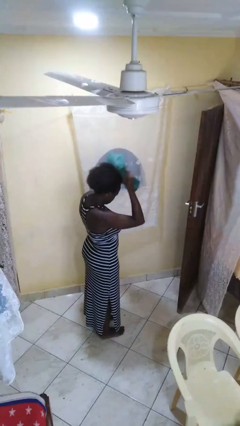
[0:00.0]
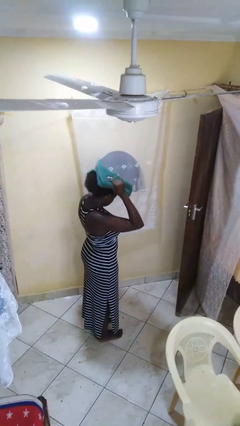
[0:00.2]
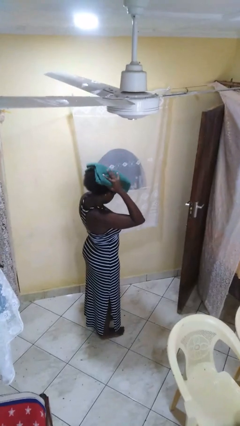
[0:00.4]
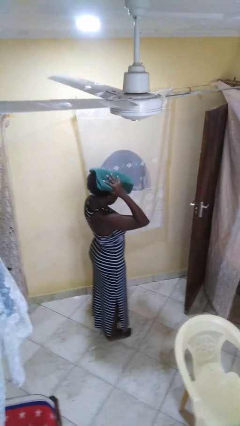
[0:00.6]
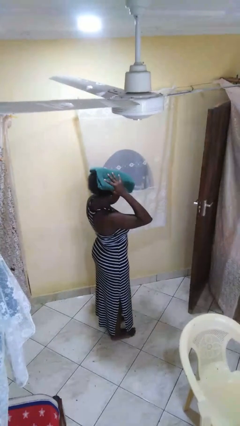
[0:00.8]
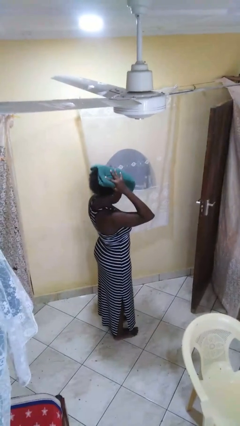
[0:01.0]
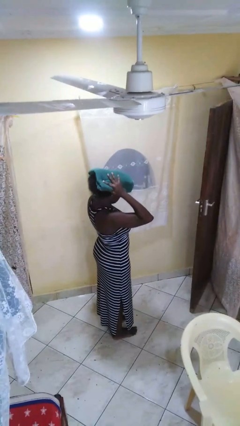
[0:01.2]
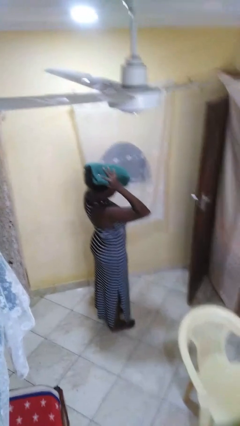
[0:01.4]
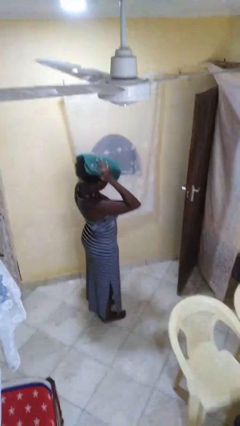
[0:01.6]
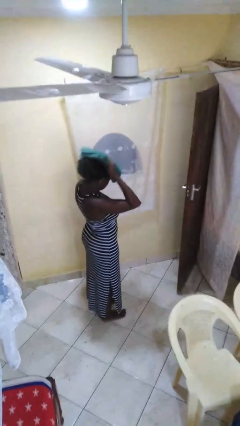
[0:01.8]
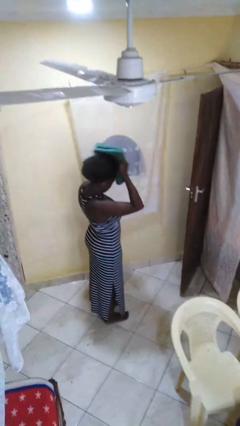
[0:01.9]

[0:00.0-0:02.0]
person dries hair with towel

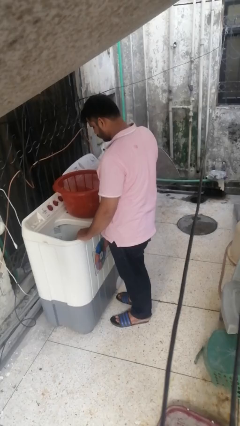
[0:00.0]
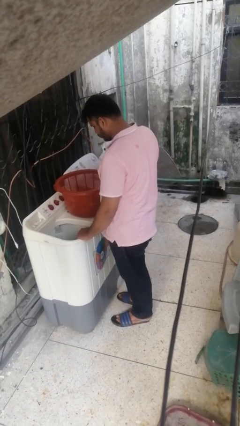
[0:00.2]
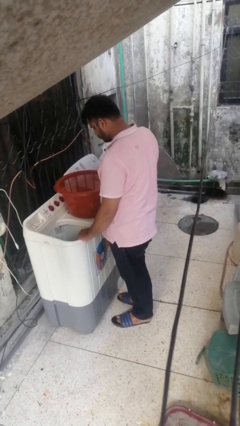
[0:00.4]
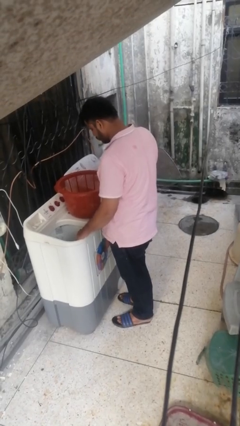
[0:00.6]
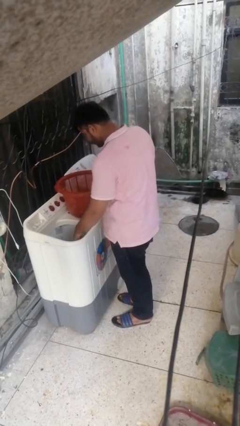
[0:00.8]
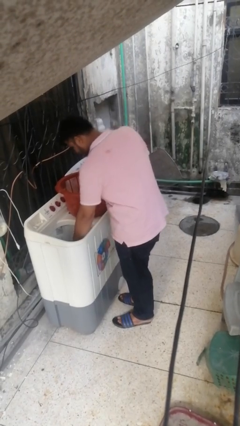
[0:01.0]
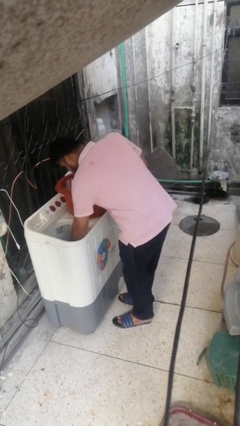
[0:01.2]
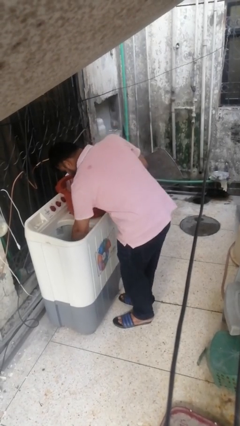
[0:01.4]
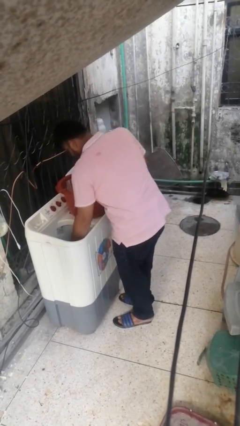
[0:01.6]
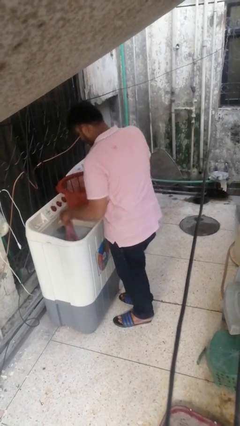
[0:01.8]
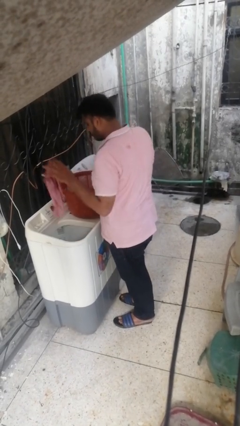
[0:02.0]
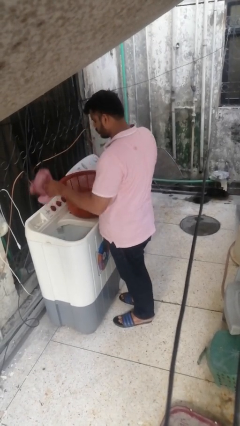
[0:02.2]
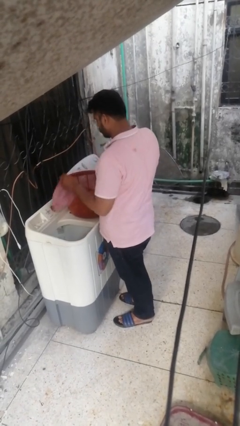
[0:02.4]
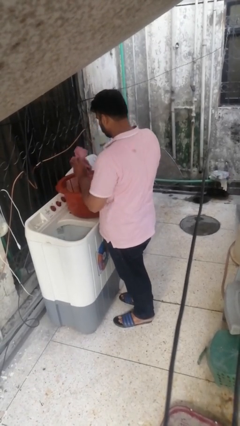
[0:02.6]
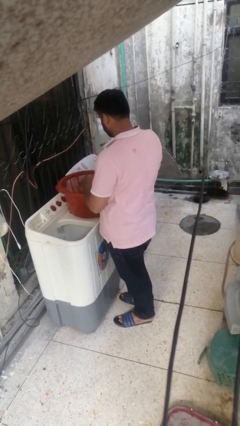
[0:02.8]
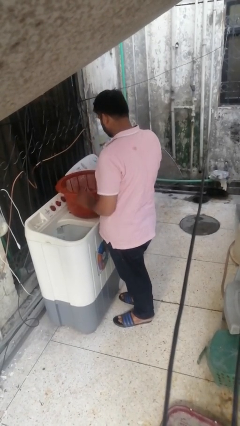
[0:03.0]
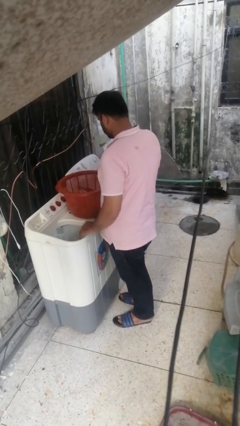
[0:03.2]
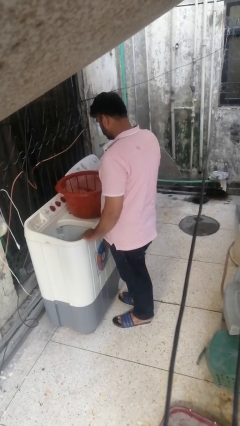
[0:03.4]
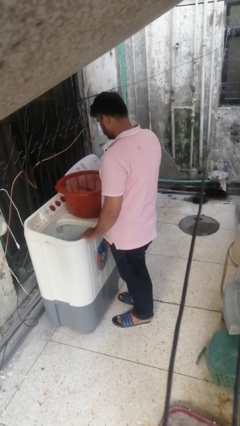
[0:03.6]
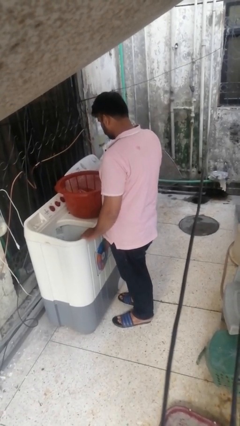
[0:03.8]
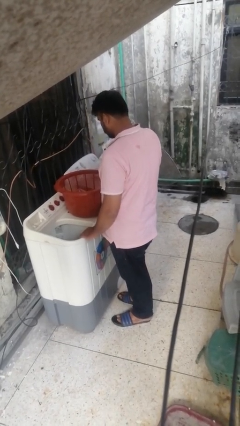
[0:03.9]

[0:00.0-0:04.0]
person unloads clotheswasher

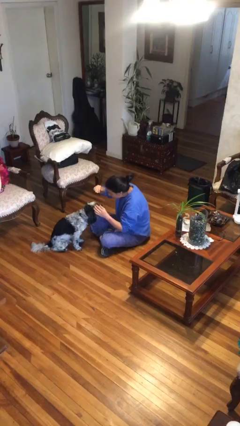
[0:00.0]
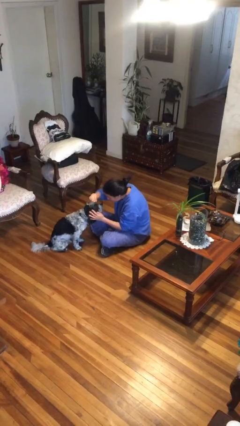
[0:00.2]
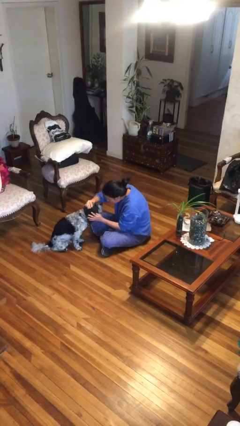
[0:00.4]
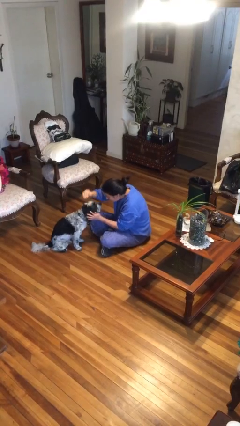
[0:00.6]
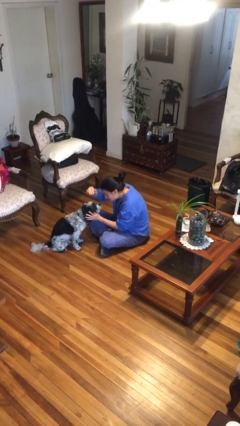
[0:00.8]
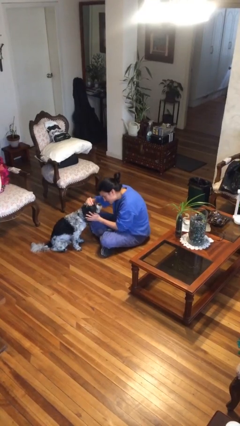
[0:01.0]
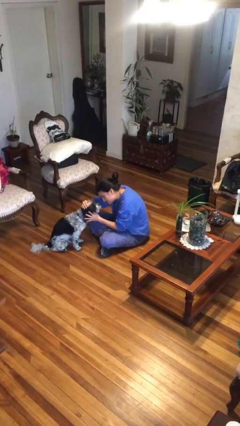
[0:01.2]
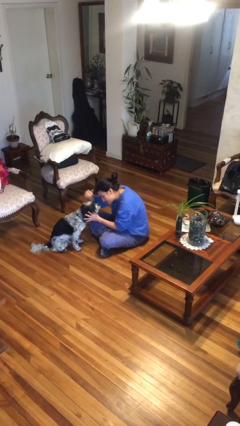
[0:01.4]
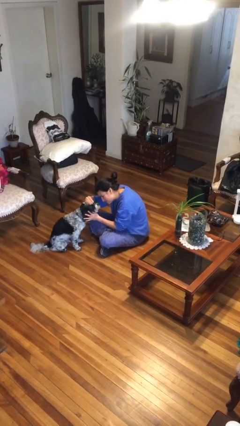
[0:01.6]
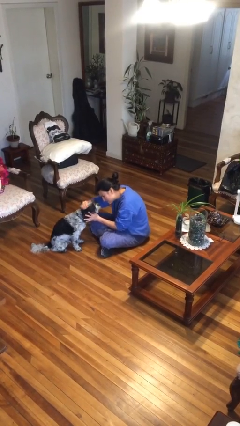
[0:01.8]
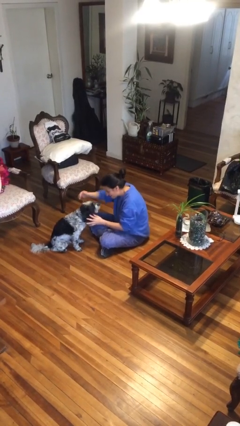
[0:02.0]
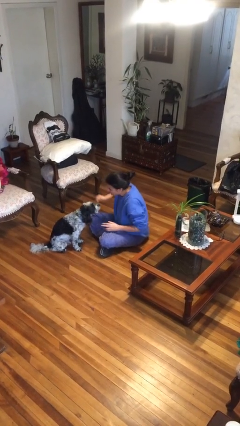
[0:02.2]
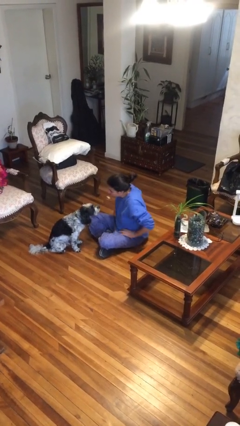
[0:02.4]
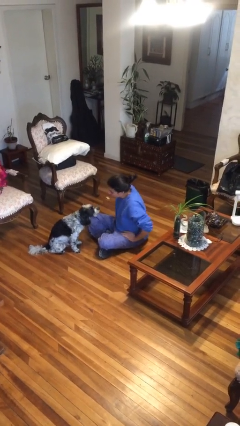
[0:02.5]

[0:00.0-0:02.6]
person pets dog

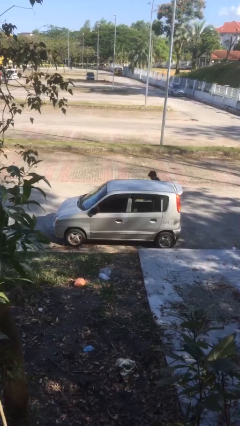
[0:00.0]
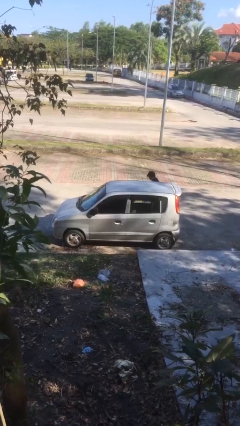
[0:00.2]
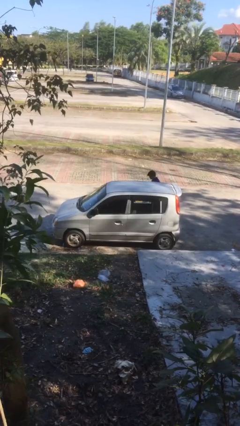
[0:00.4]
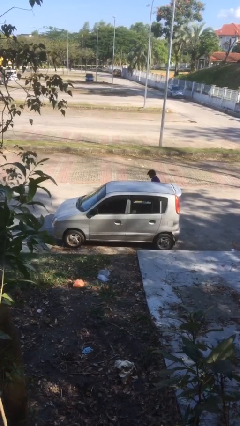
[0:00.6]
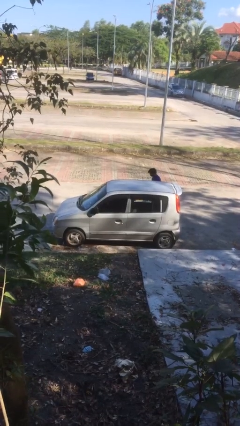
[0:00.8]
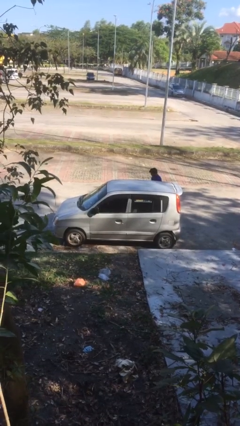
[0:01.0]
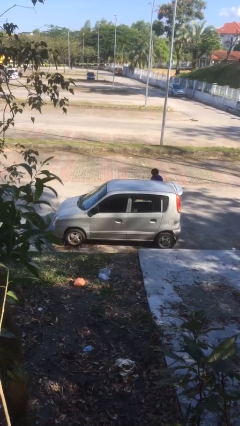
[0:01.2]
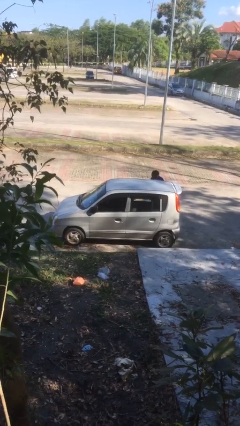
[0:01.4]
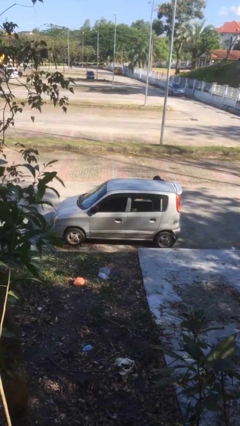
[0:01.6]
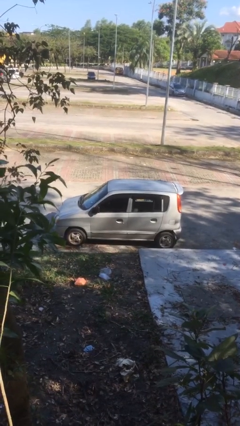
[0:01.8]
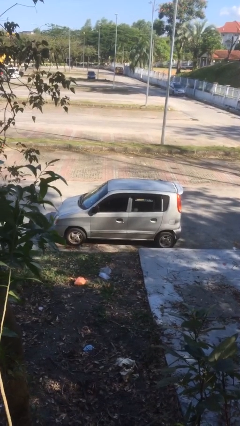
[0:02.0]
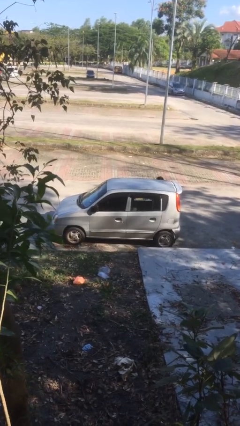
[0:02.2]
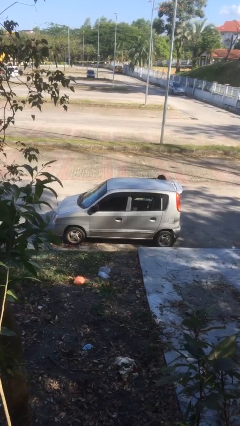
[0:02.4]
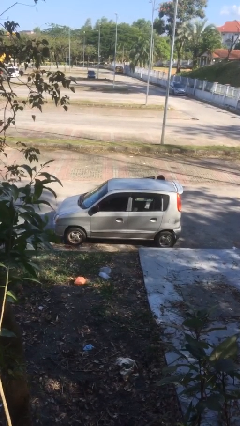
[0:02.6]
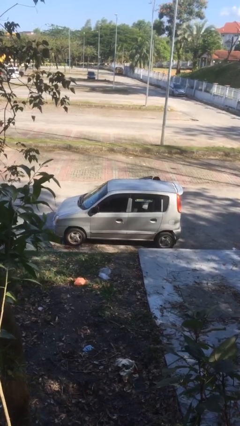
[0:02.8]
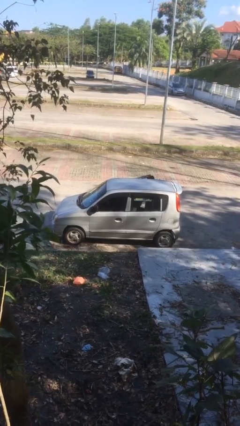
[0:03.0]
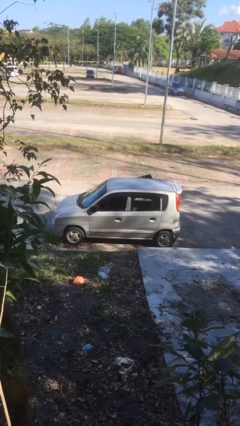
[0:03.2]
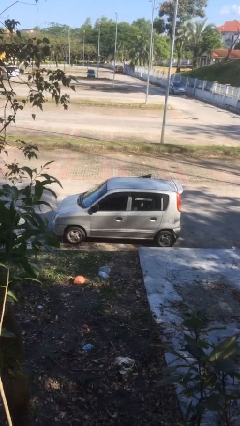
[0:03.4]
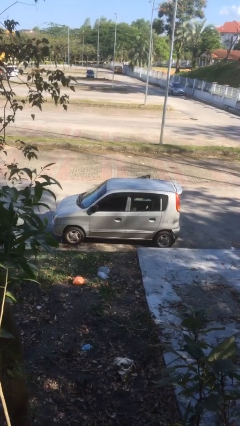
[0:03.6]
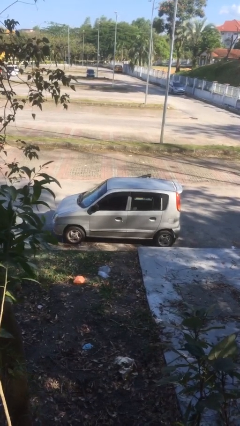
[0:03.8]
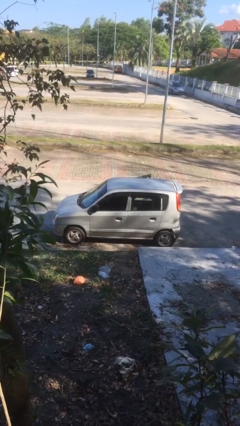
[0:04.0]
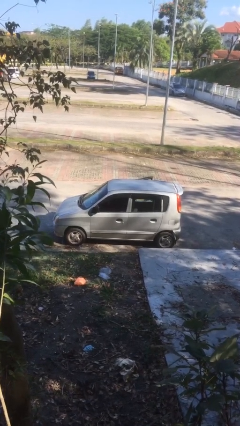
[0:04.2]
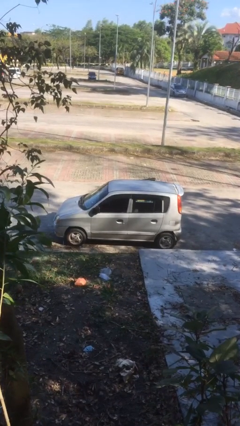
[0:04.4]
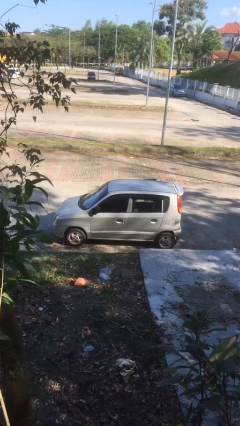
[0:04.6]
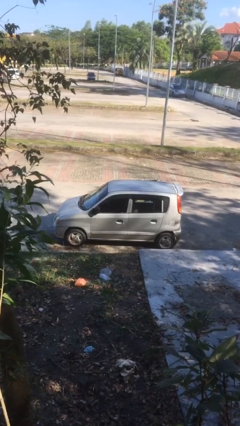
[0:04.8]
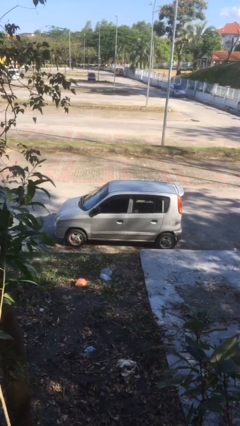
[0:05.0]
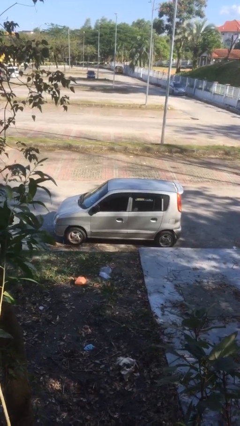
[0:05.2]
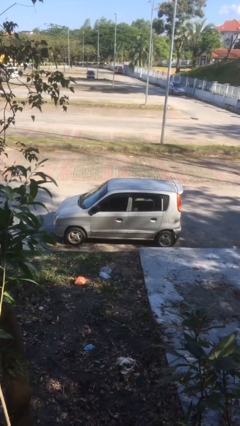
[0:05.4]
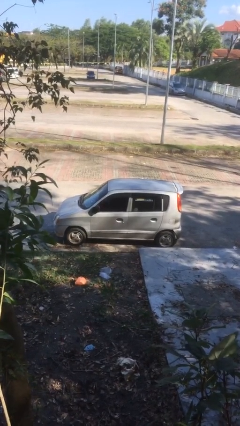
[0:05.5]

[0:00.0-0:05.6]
car picks up person

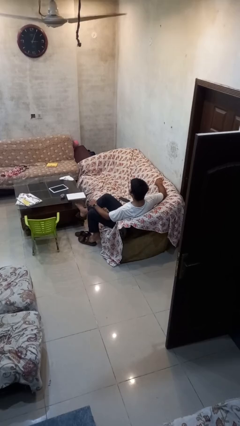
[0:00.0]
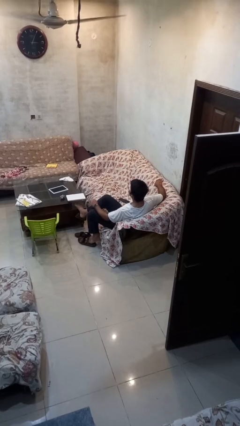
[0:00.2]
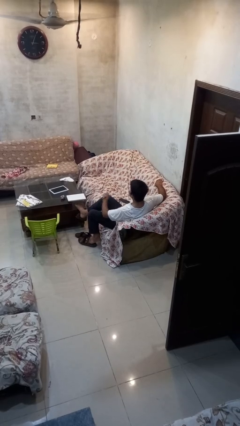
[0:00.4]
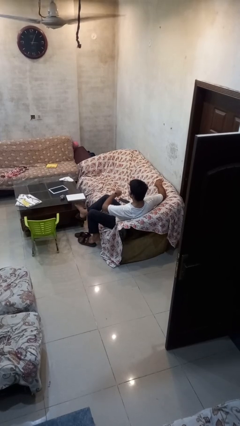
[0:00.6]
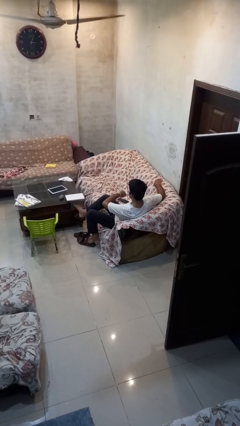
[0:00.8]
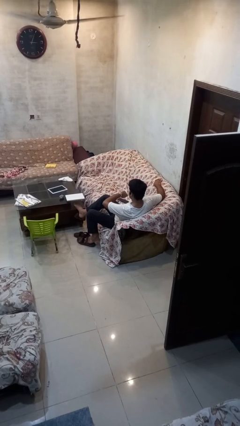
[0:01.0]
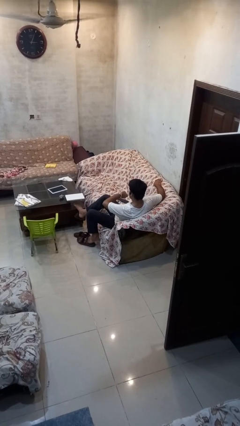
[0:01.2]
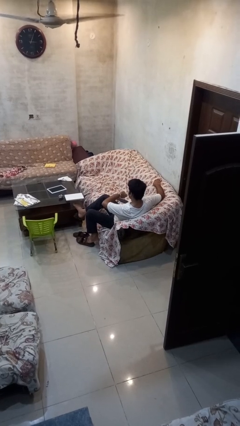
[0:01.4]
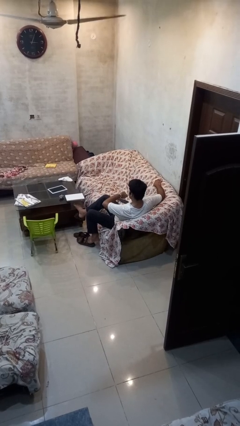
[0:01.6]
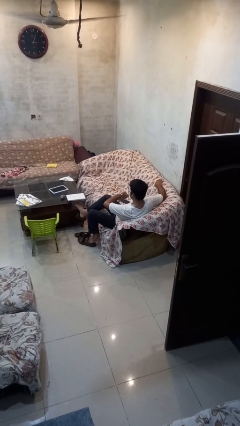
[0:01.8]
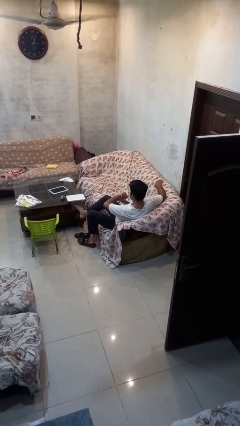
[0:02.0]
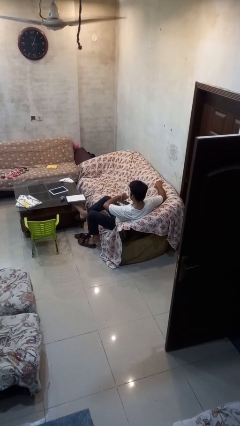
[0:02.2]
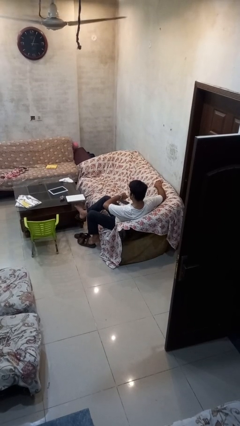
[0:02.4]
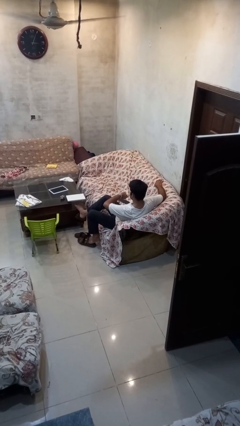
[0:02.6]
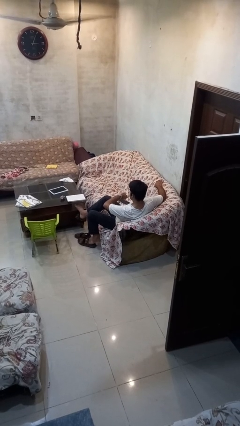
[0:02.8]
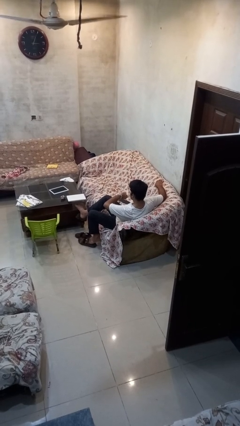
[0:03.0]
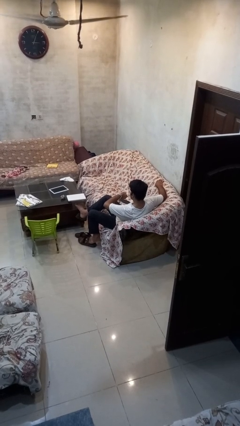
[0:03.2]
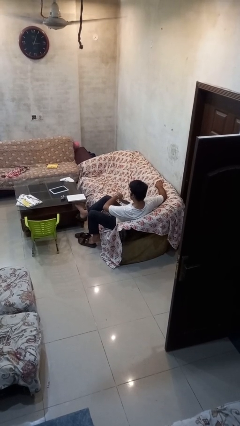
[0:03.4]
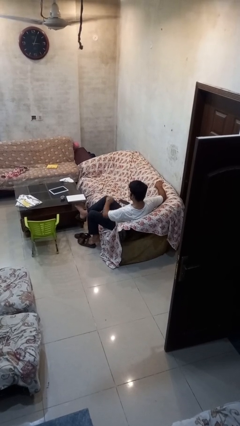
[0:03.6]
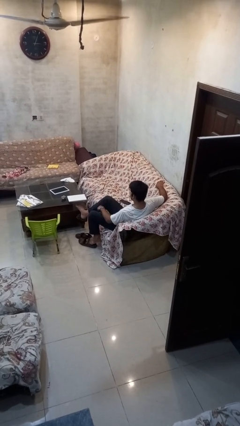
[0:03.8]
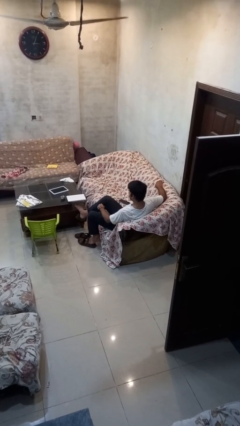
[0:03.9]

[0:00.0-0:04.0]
person looks at wristwatch
